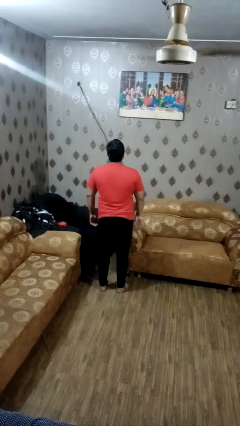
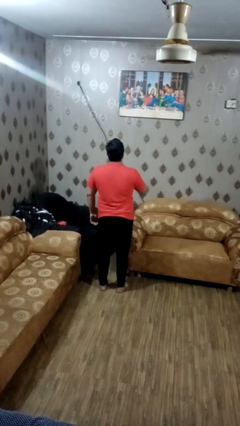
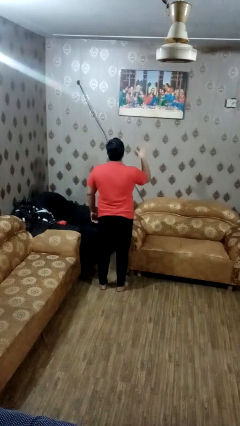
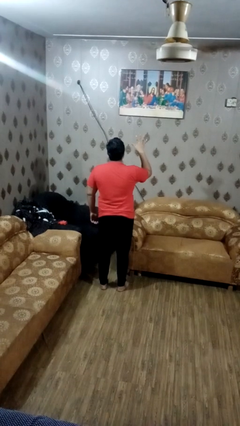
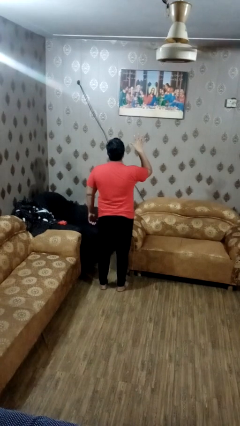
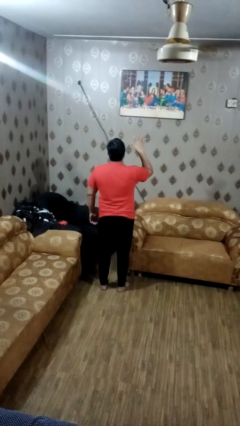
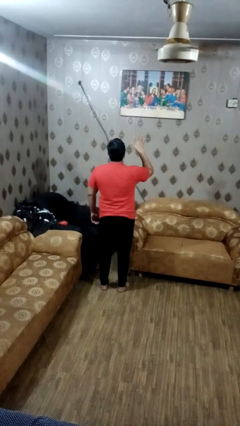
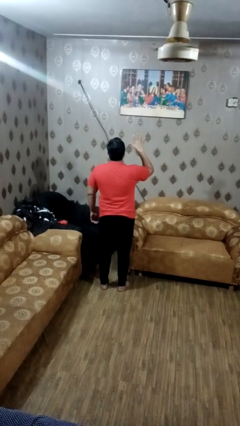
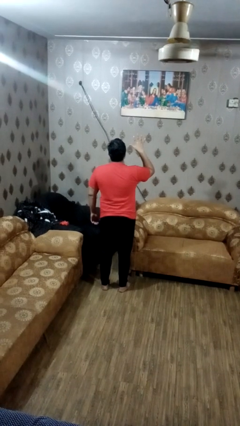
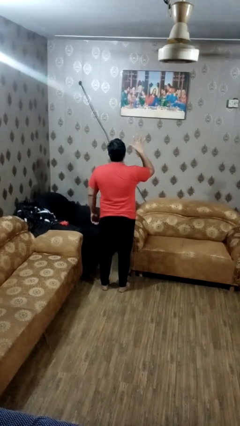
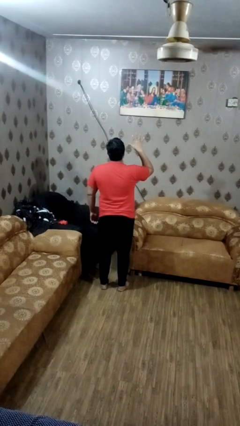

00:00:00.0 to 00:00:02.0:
person gestures number five

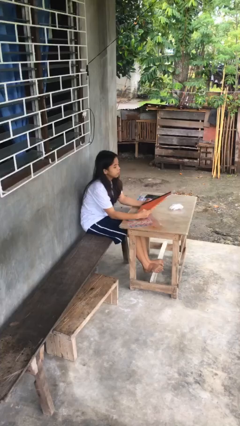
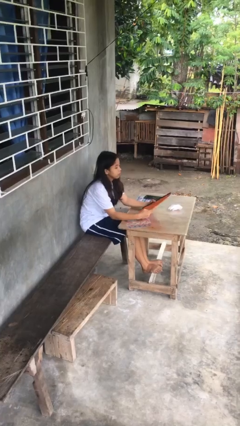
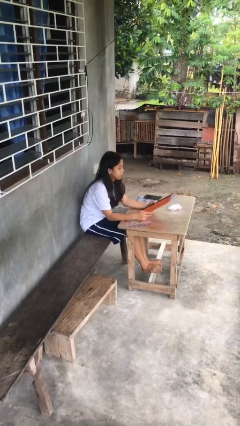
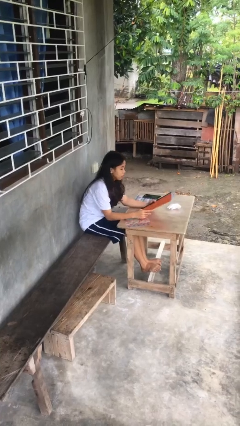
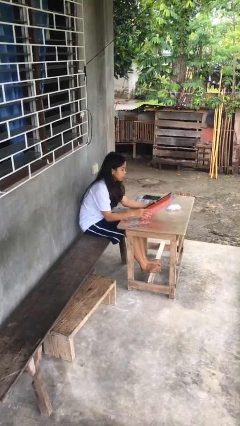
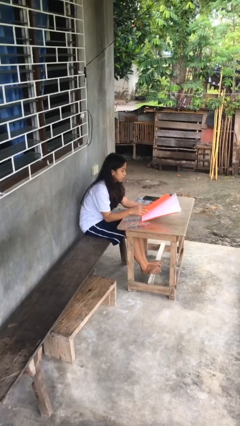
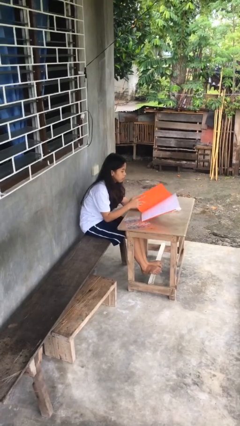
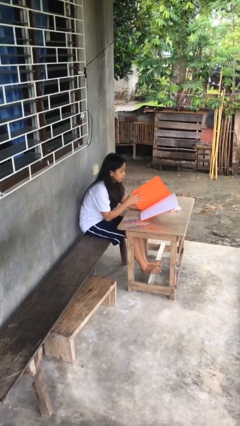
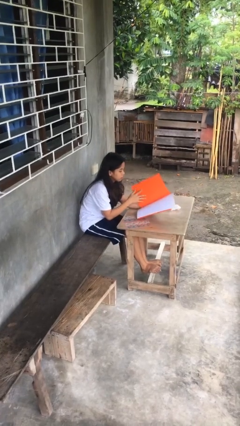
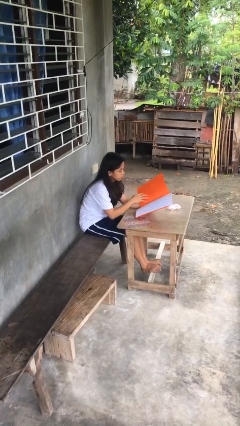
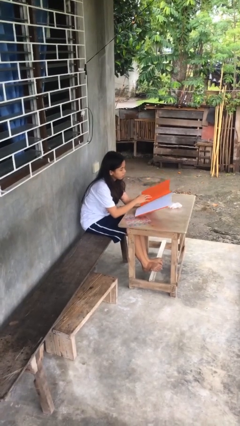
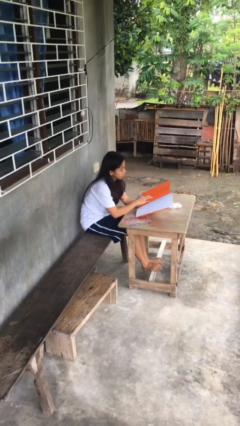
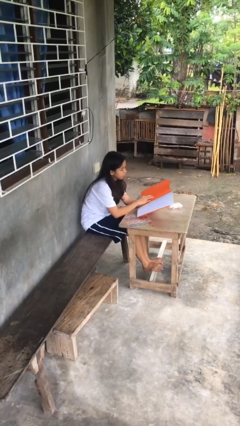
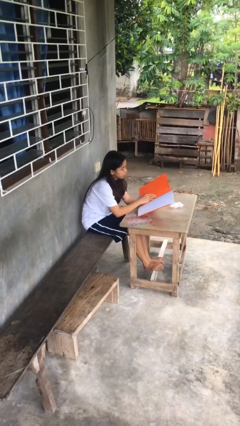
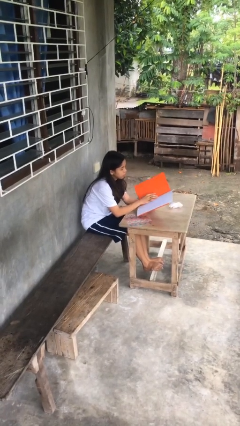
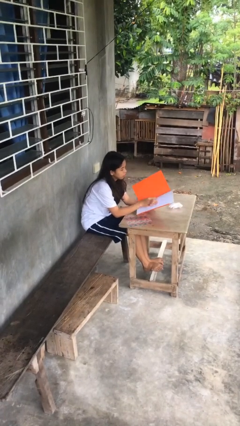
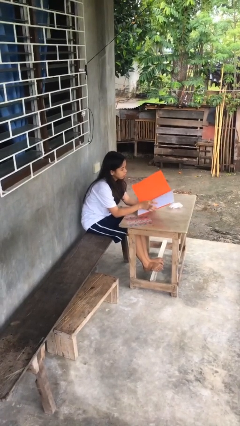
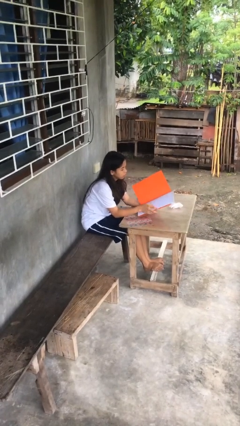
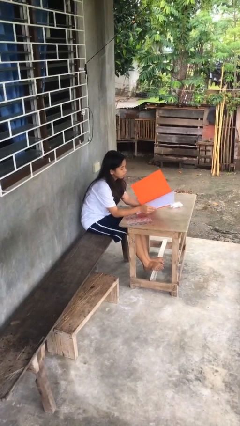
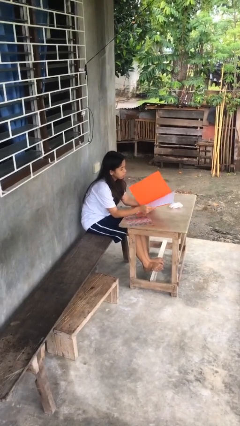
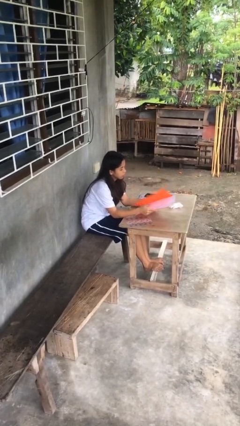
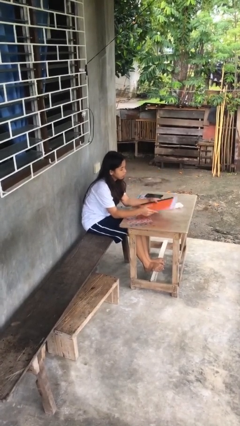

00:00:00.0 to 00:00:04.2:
person reads document

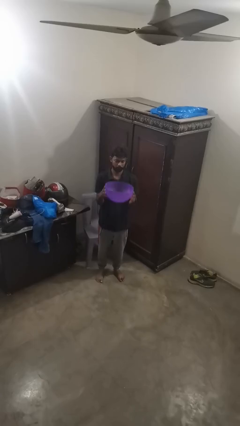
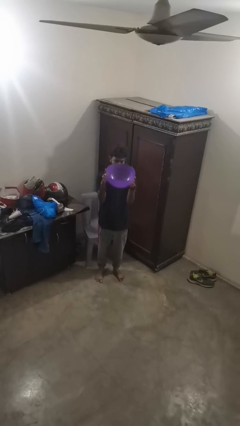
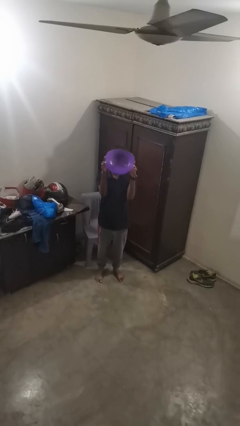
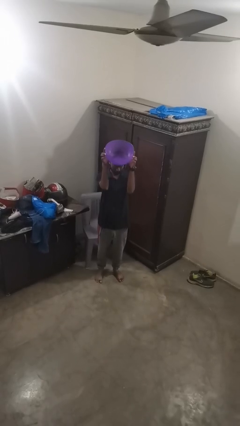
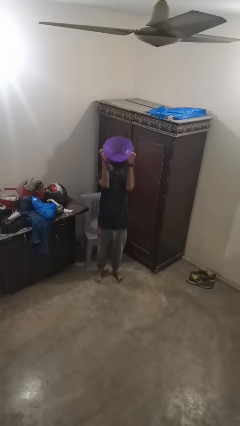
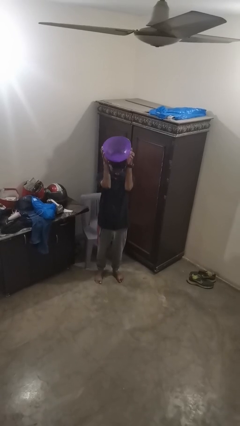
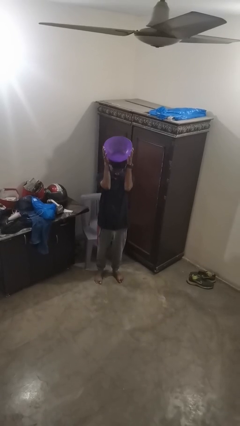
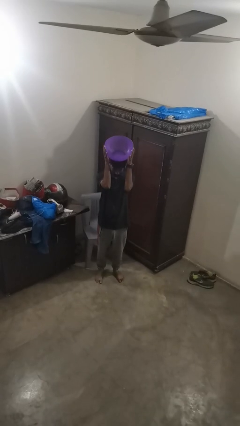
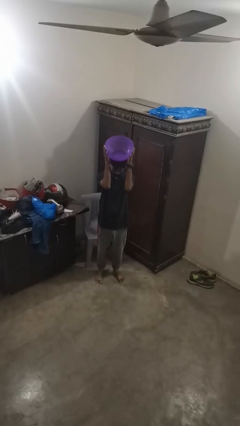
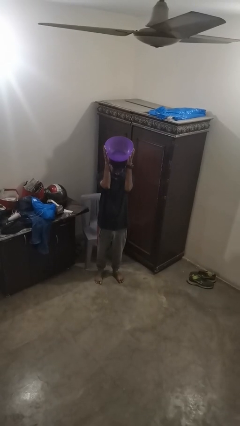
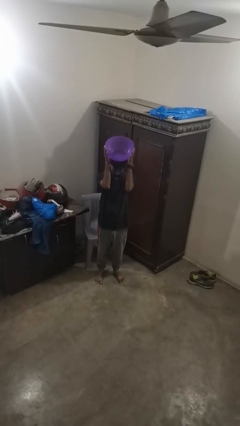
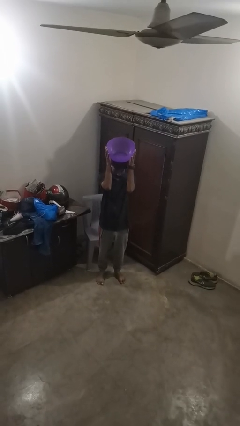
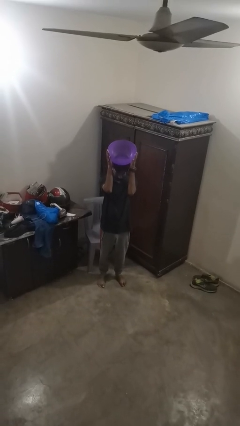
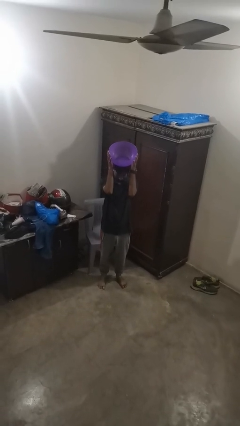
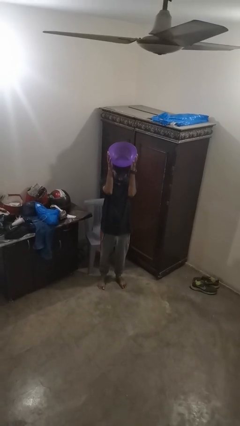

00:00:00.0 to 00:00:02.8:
person holds object above head

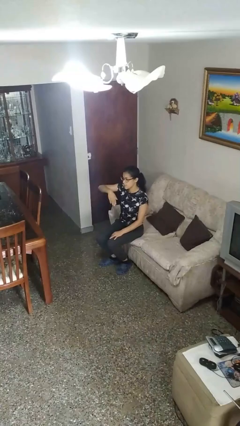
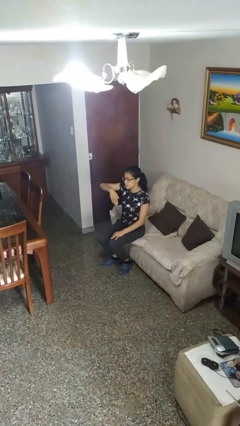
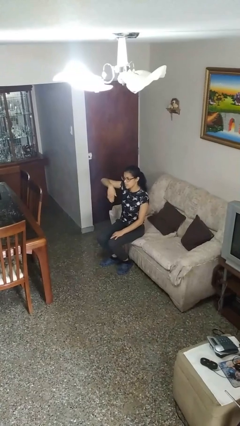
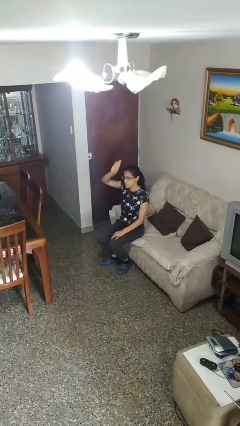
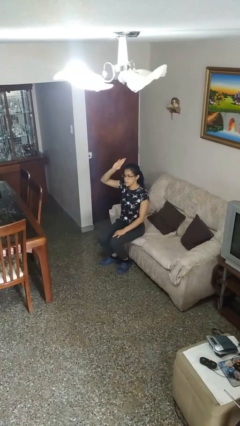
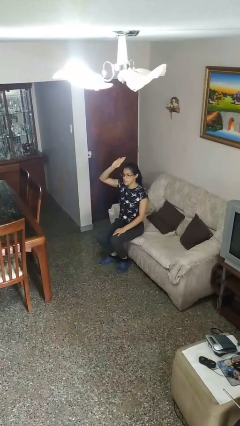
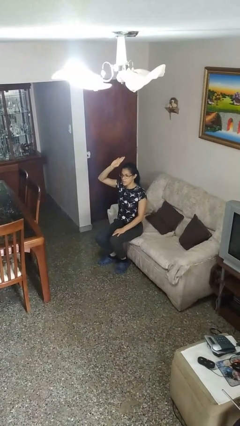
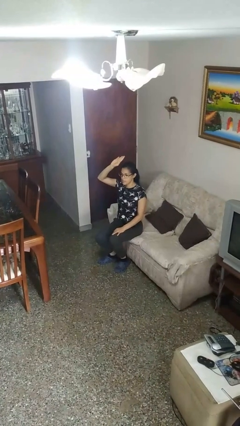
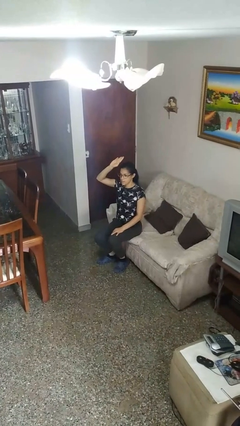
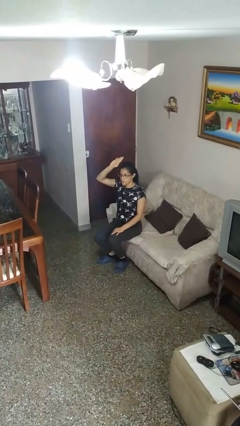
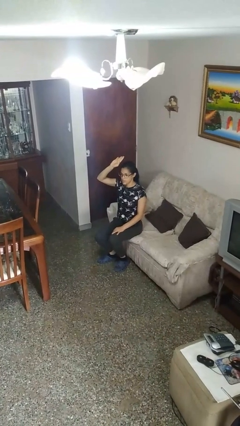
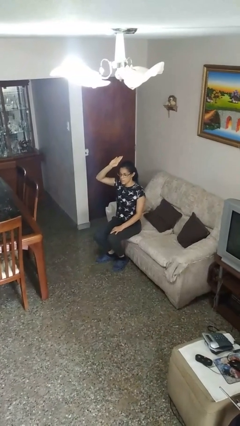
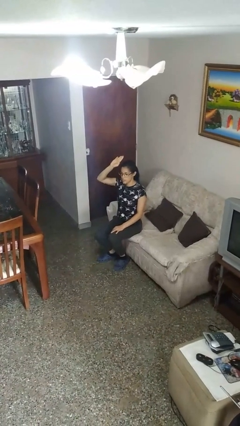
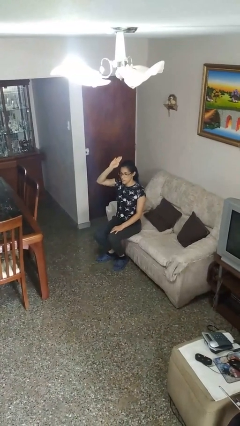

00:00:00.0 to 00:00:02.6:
person gestures swipe up

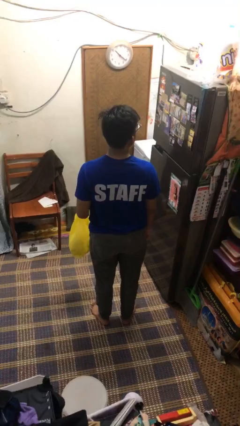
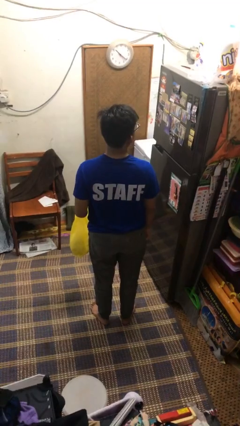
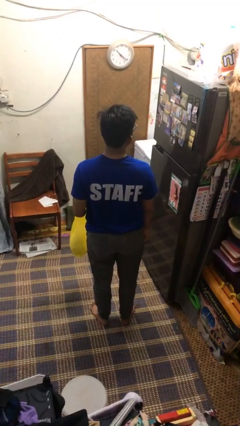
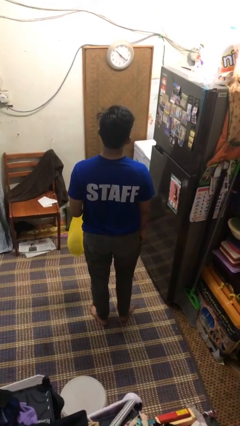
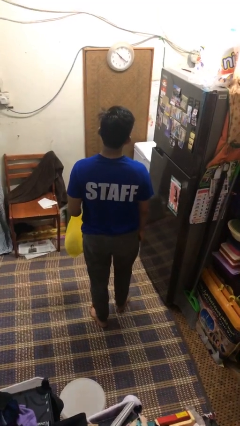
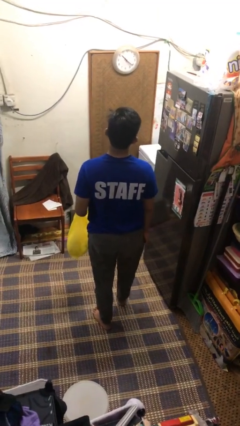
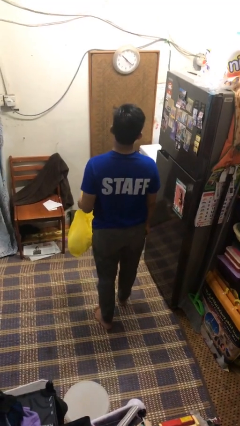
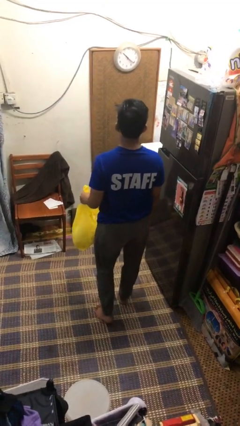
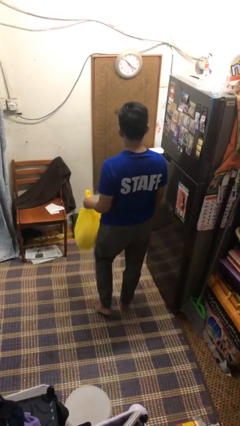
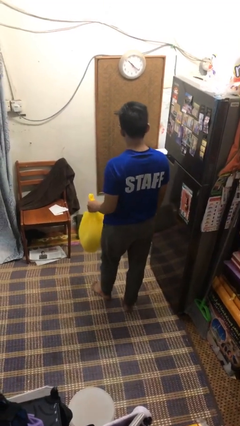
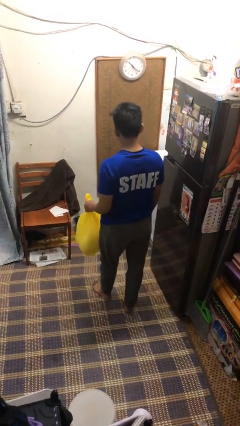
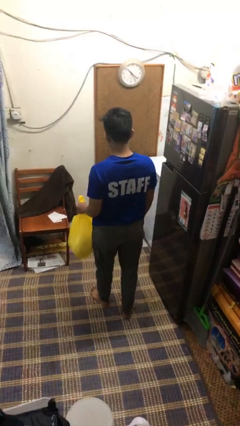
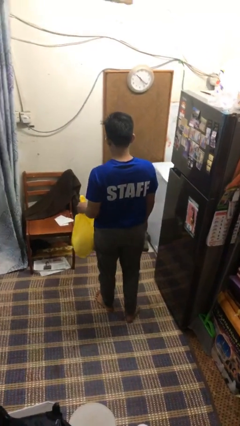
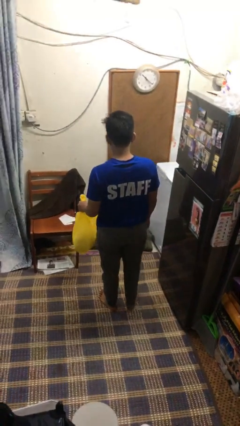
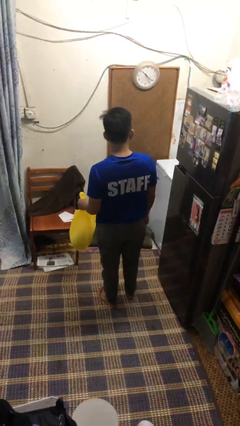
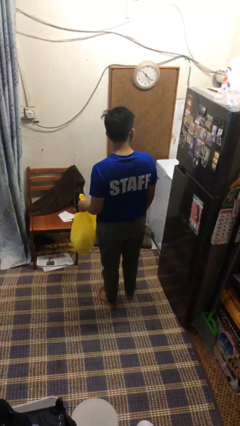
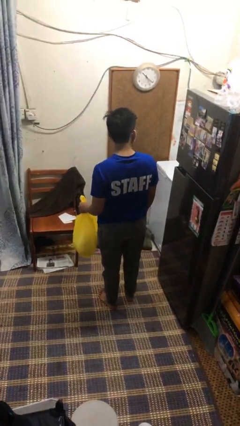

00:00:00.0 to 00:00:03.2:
person carries groceries

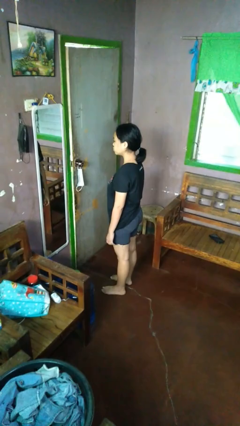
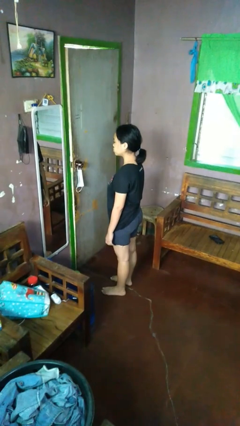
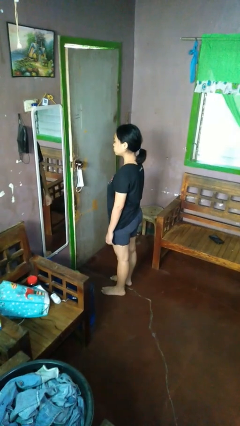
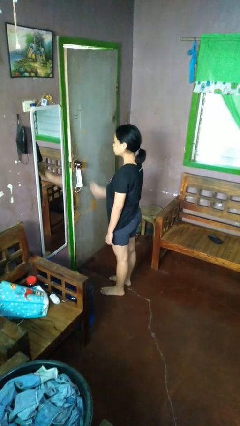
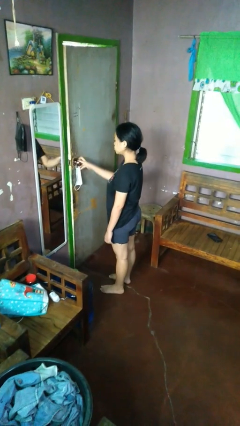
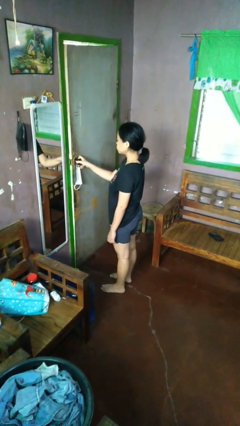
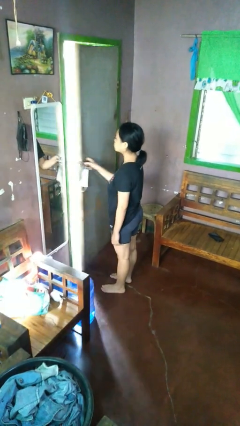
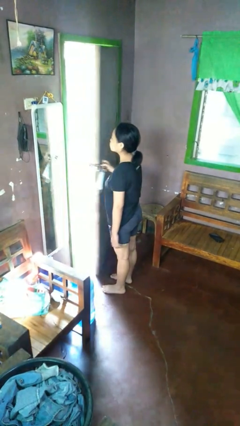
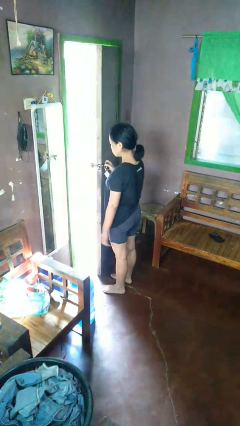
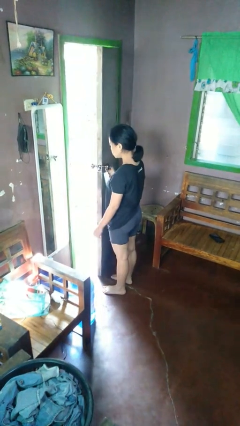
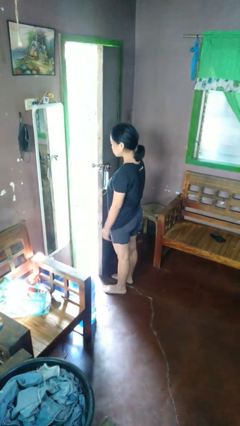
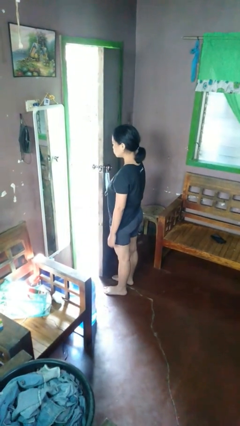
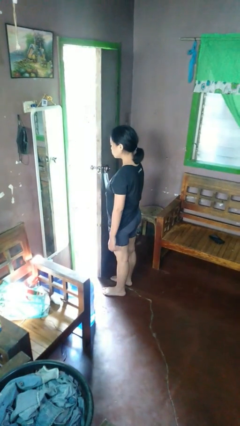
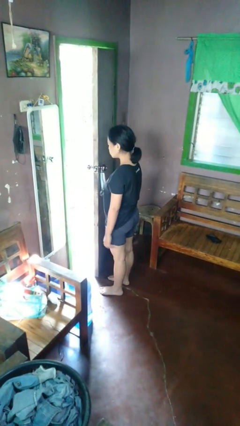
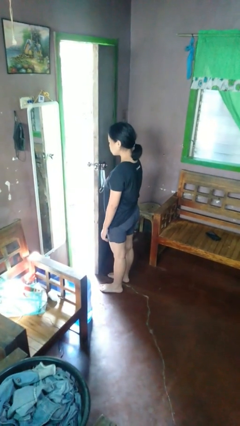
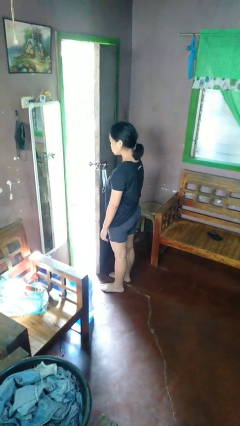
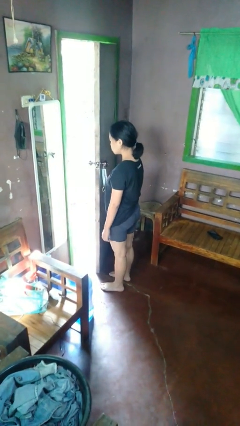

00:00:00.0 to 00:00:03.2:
person opens facility door
